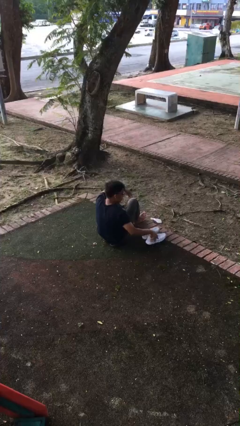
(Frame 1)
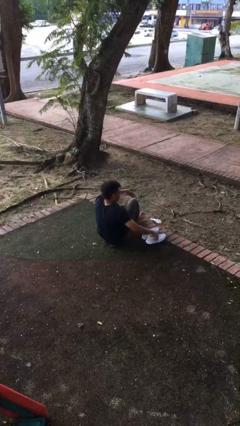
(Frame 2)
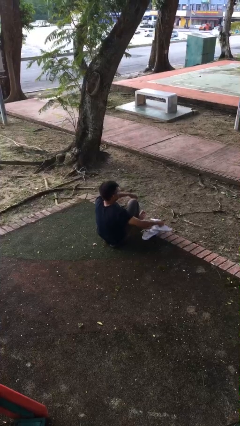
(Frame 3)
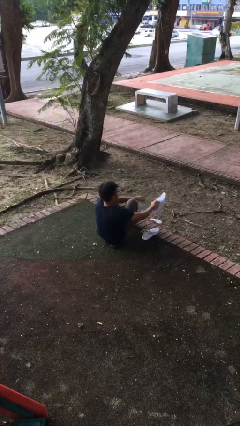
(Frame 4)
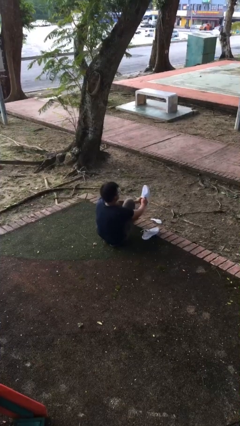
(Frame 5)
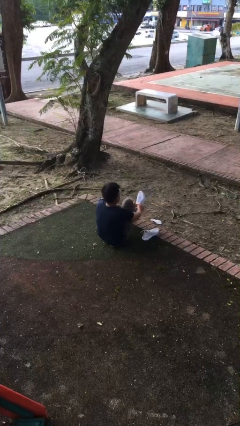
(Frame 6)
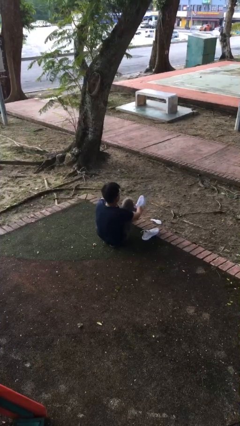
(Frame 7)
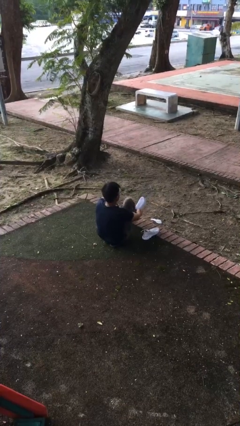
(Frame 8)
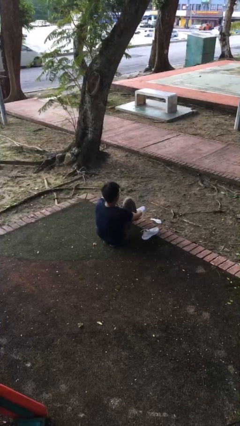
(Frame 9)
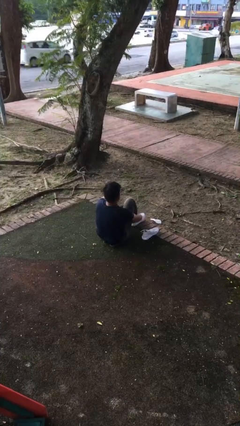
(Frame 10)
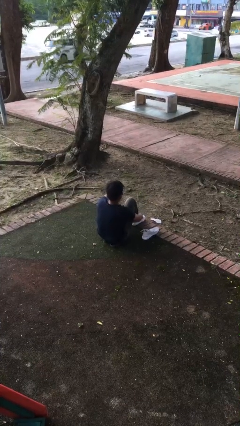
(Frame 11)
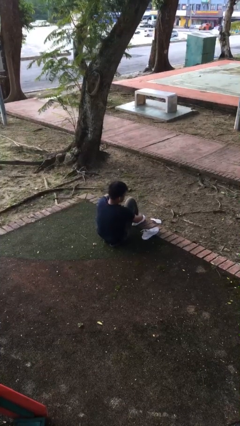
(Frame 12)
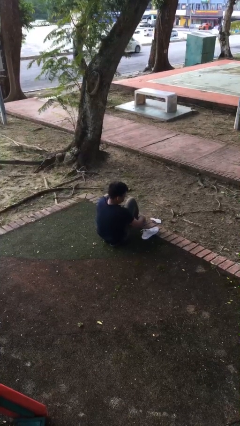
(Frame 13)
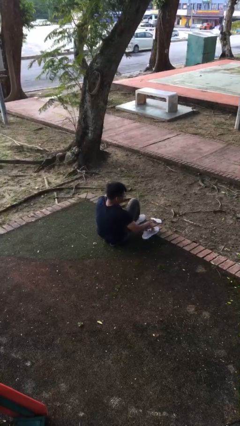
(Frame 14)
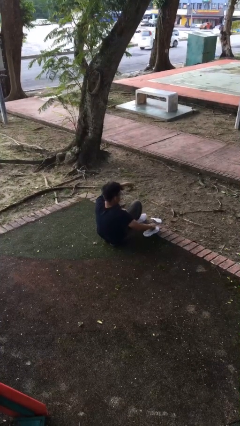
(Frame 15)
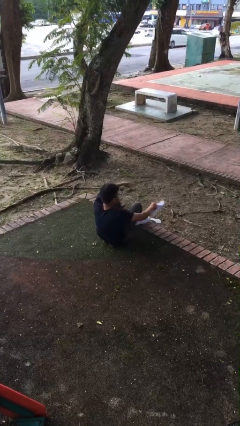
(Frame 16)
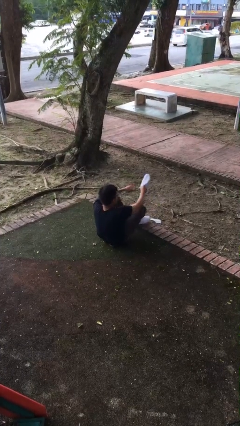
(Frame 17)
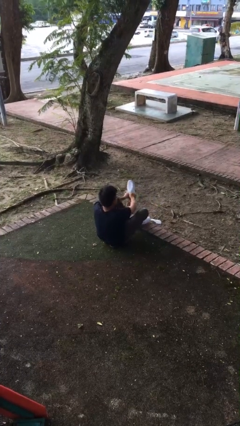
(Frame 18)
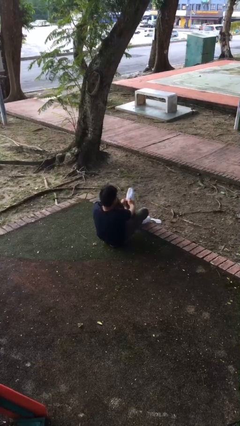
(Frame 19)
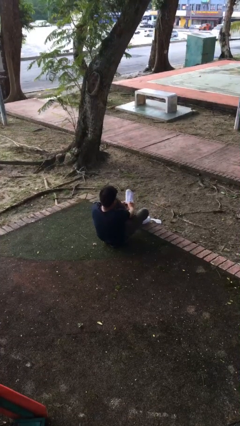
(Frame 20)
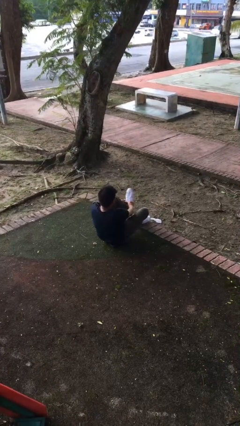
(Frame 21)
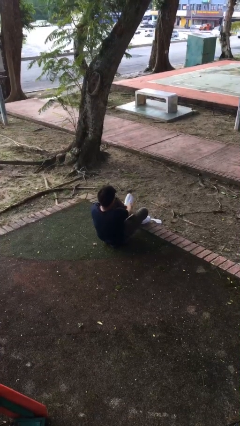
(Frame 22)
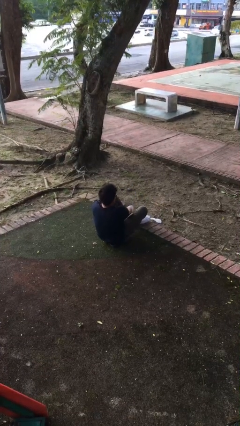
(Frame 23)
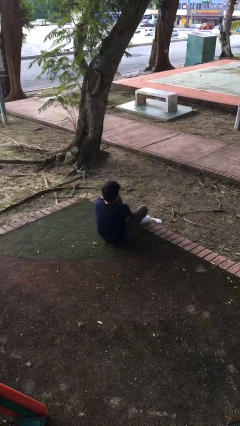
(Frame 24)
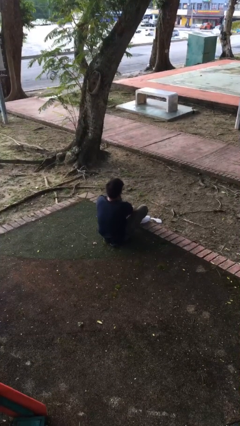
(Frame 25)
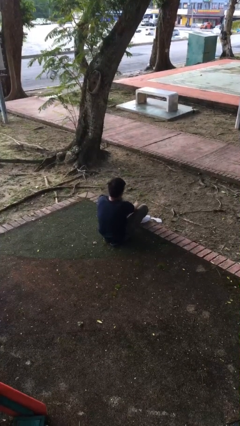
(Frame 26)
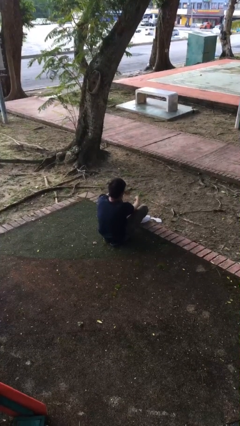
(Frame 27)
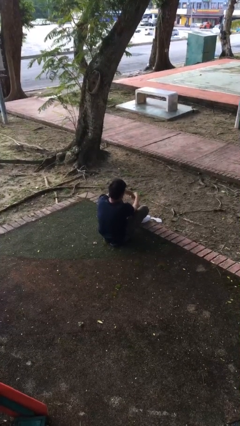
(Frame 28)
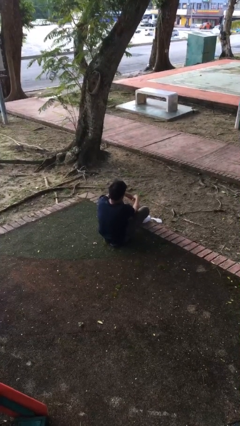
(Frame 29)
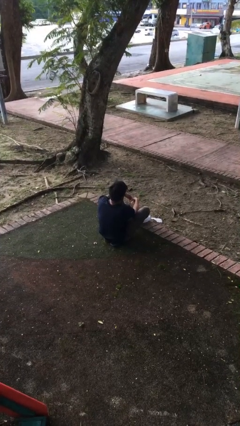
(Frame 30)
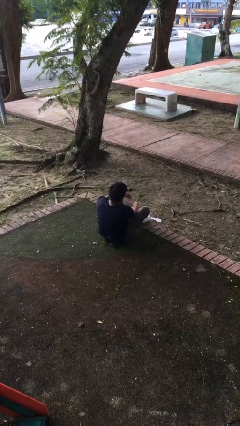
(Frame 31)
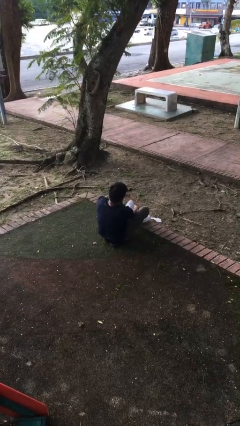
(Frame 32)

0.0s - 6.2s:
person puts on shoes

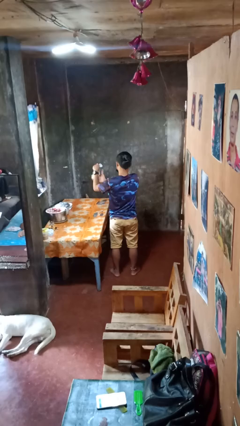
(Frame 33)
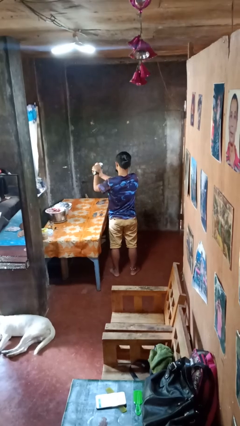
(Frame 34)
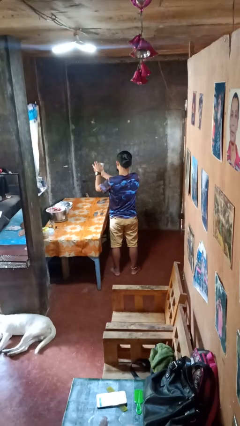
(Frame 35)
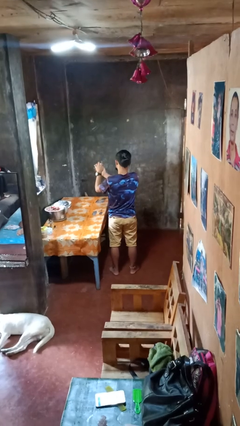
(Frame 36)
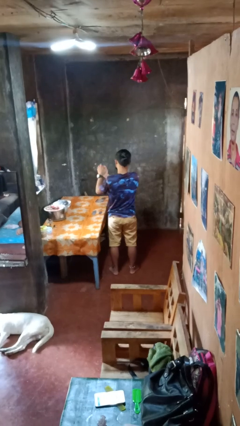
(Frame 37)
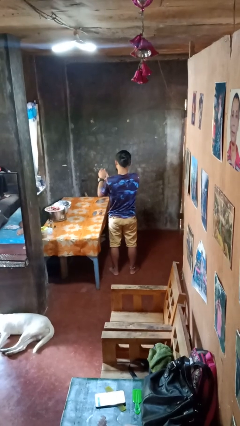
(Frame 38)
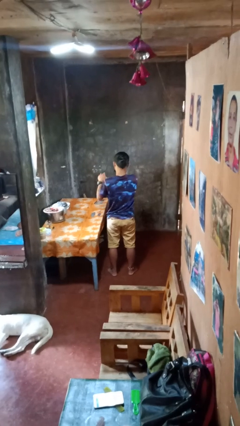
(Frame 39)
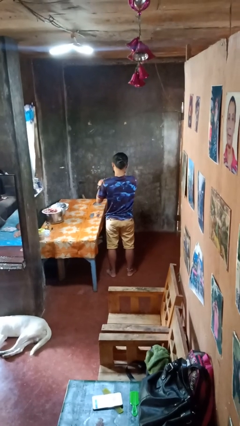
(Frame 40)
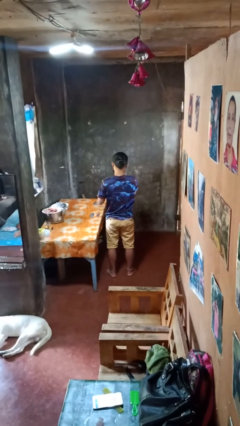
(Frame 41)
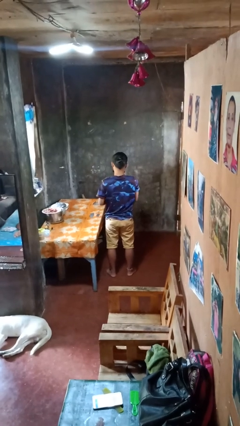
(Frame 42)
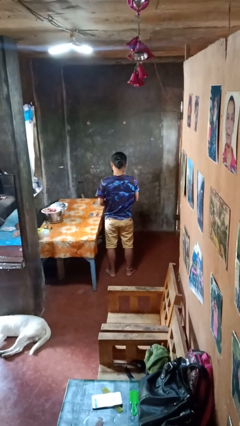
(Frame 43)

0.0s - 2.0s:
person crumples paper

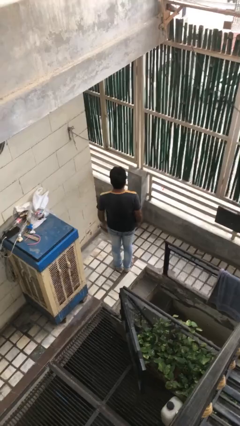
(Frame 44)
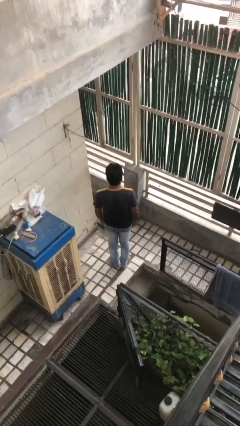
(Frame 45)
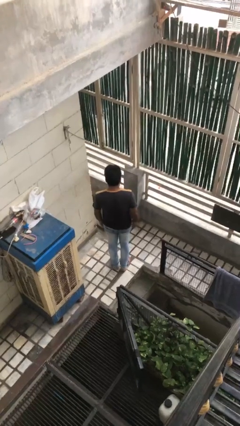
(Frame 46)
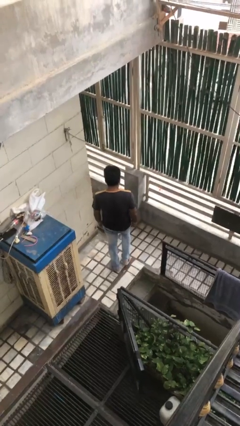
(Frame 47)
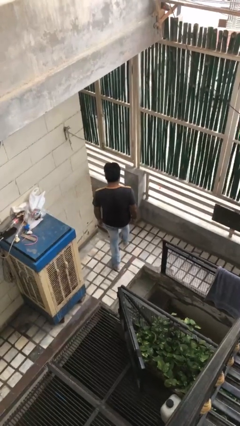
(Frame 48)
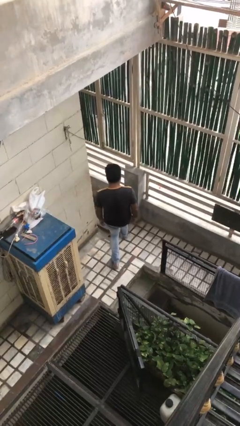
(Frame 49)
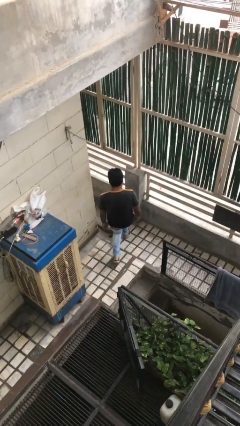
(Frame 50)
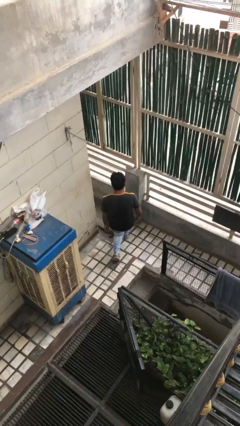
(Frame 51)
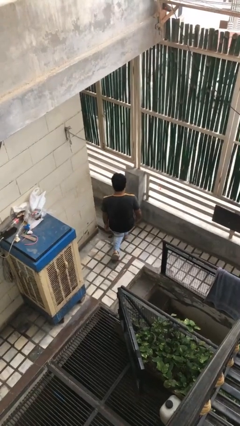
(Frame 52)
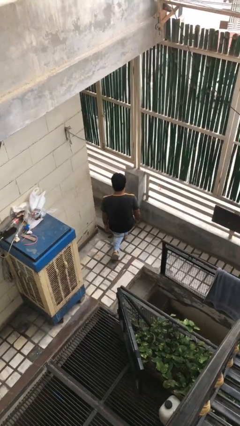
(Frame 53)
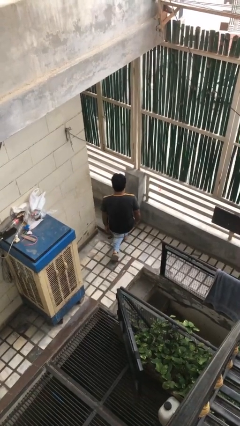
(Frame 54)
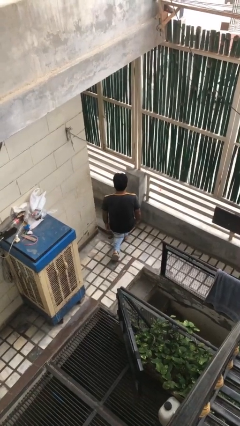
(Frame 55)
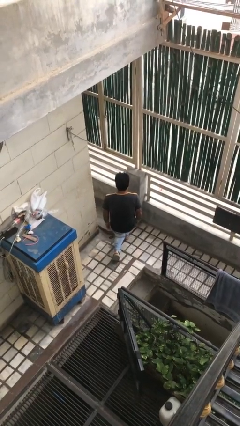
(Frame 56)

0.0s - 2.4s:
person kneels

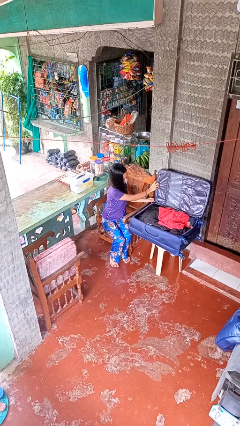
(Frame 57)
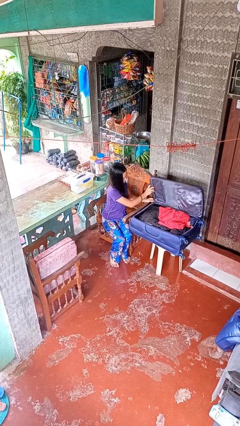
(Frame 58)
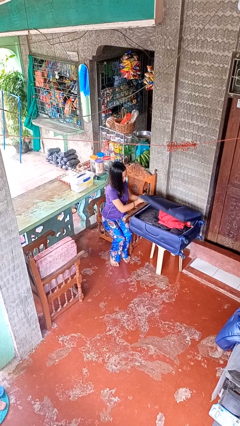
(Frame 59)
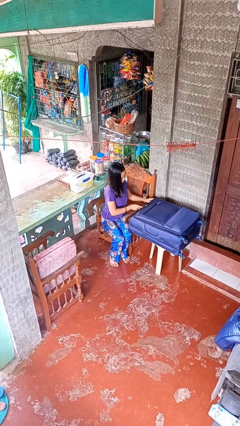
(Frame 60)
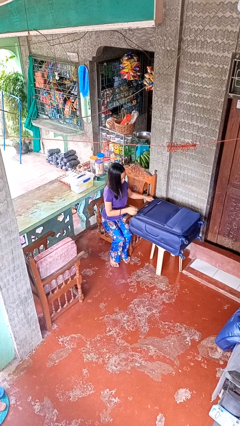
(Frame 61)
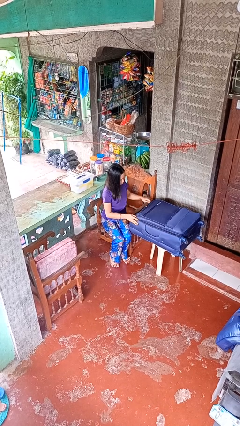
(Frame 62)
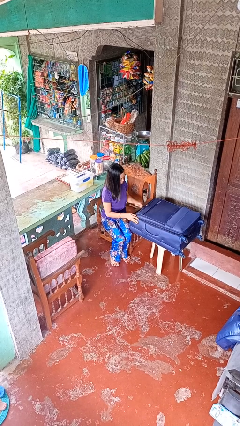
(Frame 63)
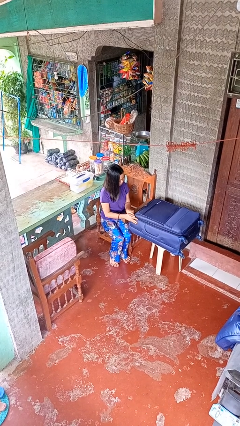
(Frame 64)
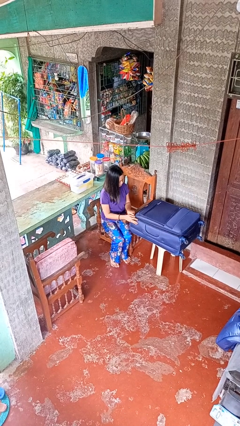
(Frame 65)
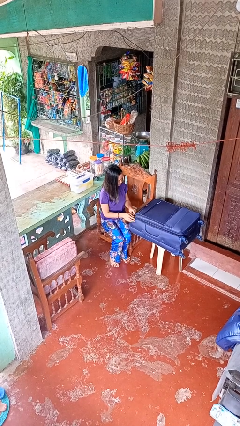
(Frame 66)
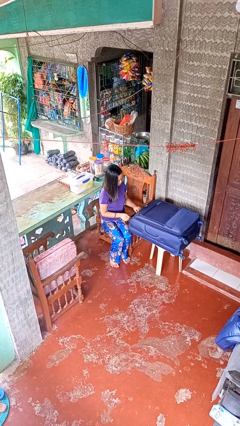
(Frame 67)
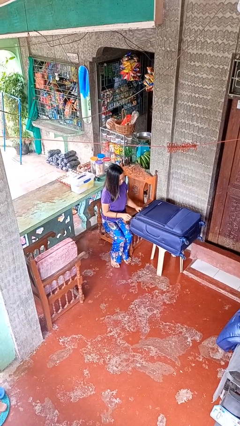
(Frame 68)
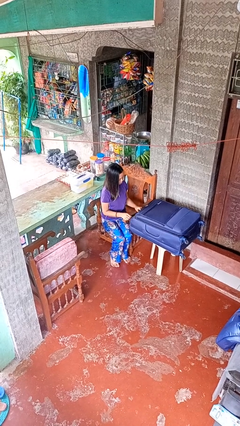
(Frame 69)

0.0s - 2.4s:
person closes suitcase

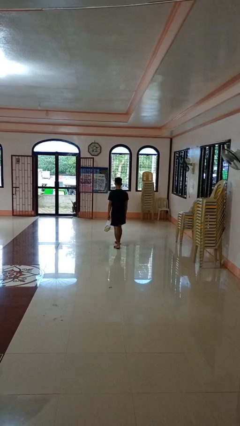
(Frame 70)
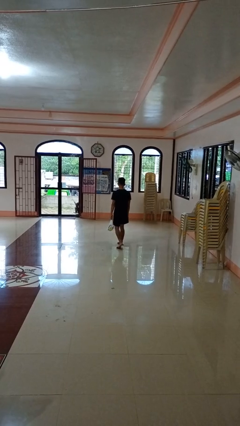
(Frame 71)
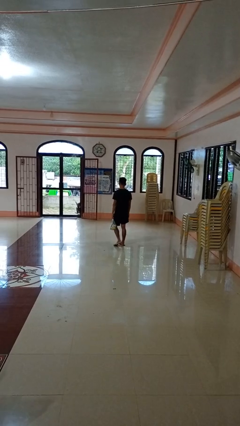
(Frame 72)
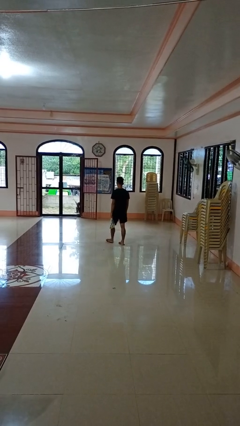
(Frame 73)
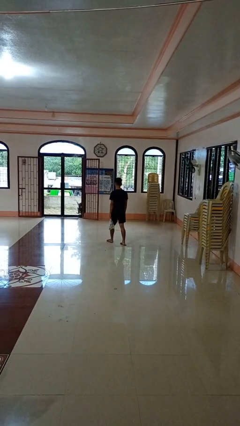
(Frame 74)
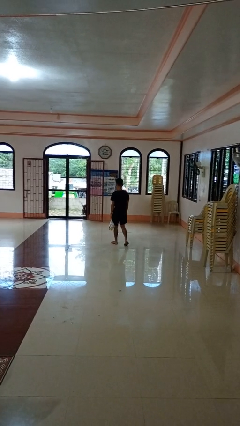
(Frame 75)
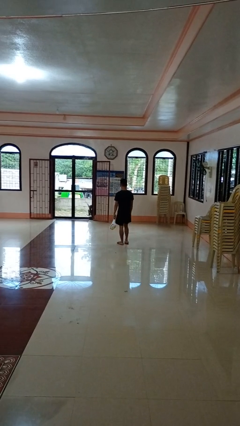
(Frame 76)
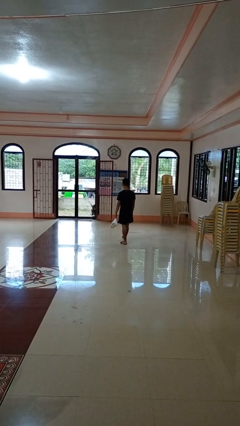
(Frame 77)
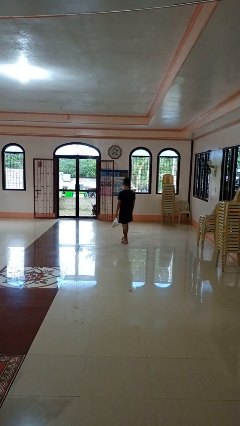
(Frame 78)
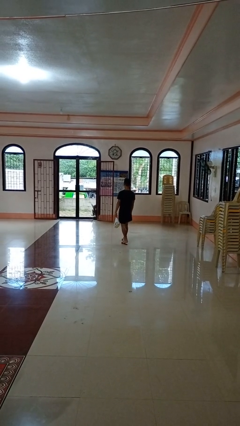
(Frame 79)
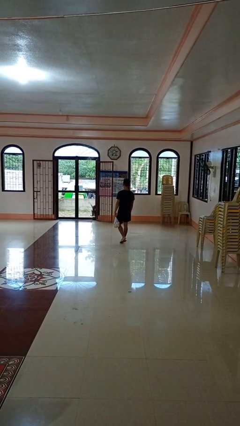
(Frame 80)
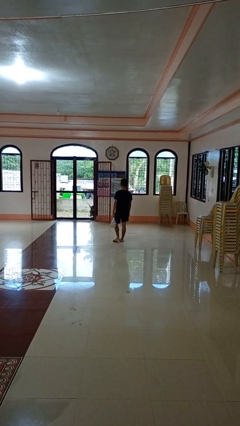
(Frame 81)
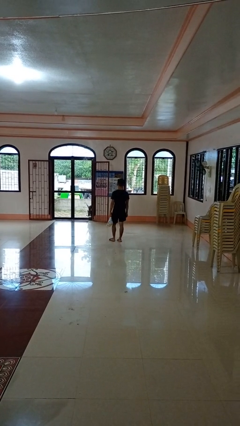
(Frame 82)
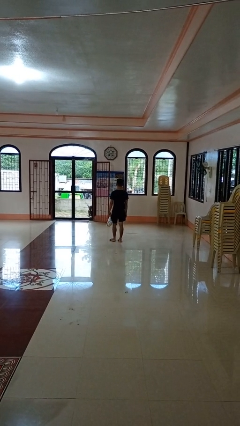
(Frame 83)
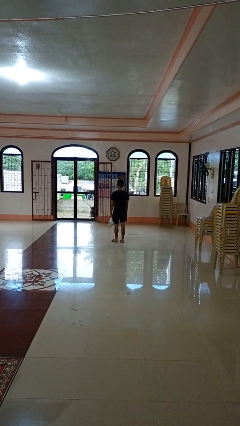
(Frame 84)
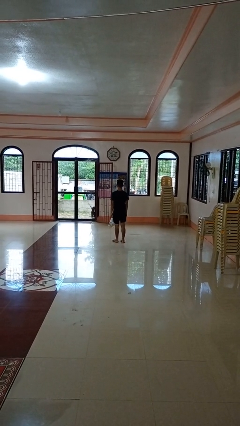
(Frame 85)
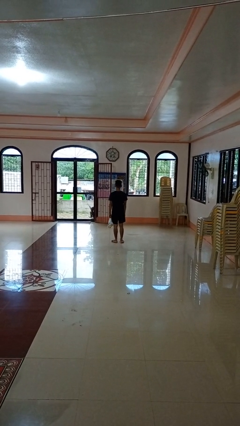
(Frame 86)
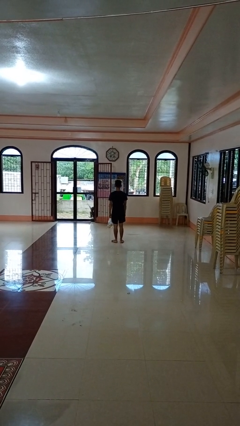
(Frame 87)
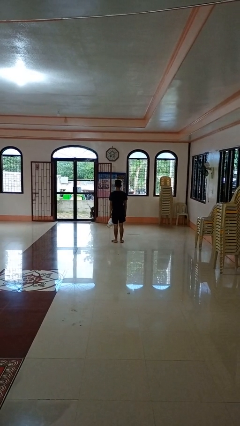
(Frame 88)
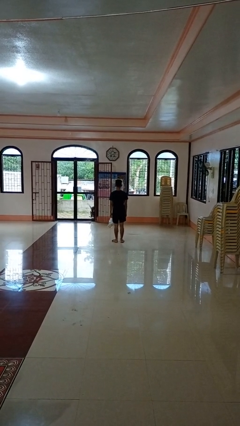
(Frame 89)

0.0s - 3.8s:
person carries groceries

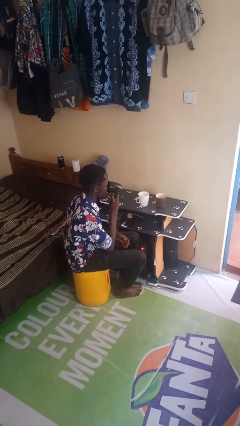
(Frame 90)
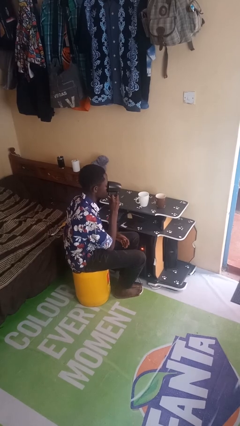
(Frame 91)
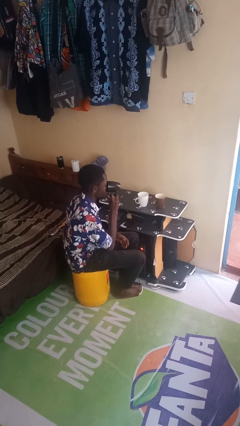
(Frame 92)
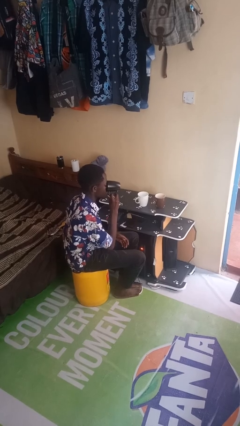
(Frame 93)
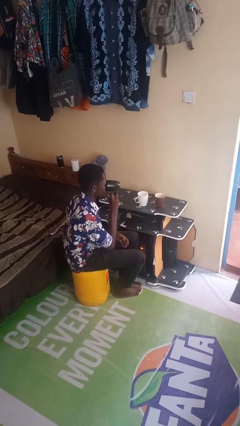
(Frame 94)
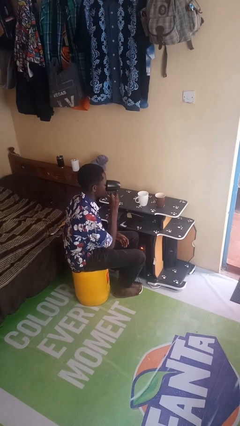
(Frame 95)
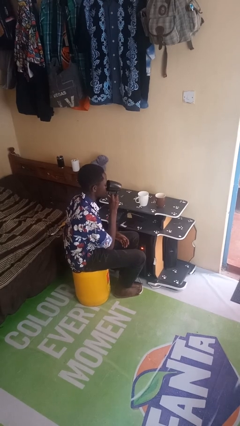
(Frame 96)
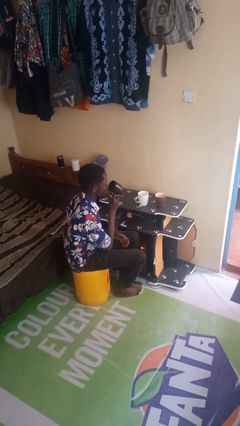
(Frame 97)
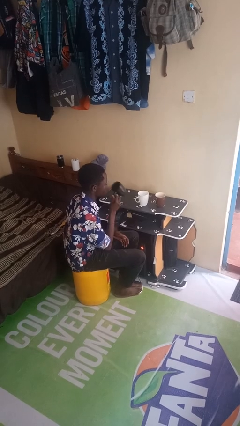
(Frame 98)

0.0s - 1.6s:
person drinks from shotglass
